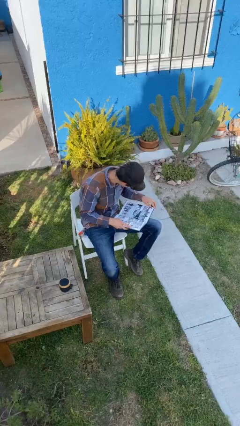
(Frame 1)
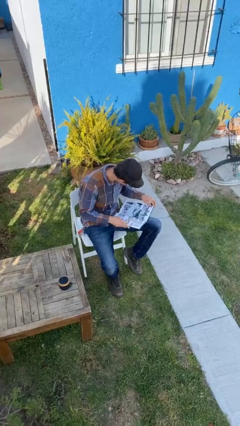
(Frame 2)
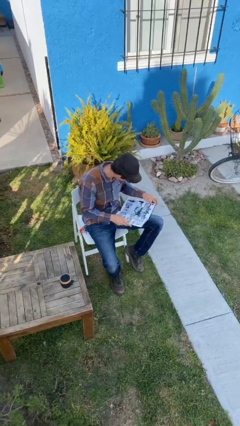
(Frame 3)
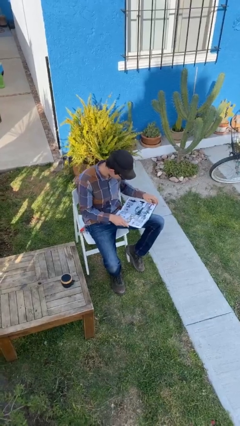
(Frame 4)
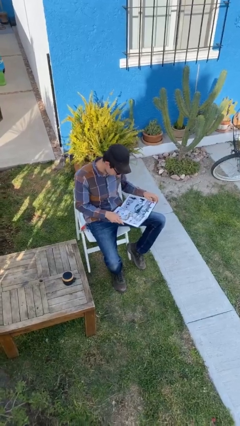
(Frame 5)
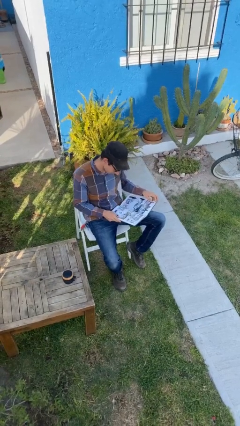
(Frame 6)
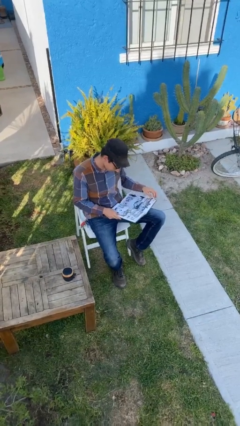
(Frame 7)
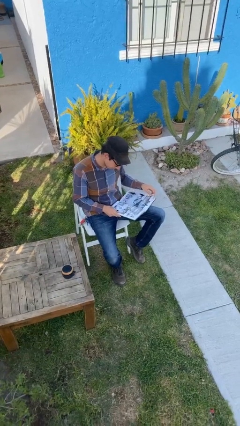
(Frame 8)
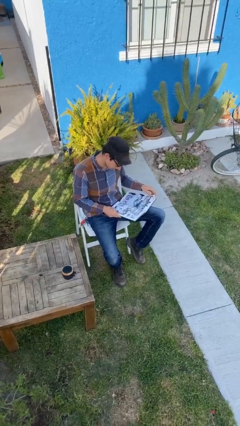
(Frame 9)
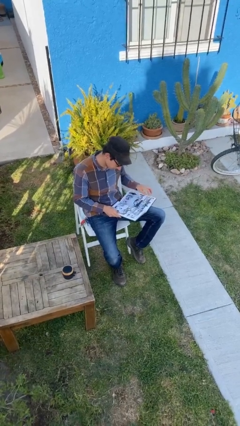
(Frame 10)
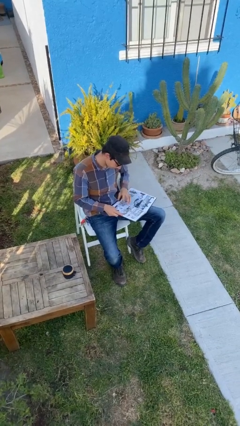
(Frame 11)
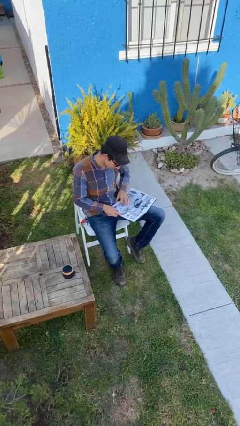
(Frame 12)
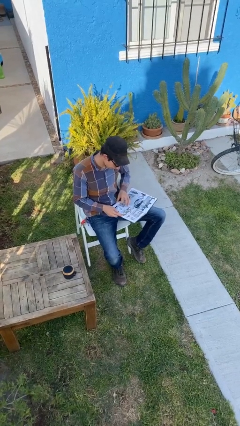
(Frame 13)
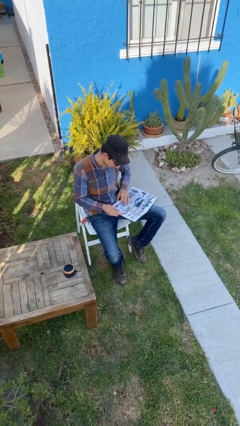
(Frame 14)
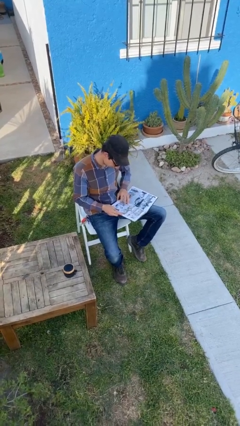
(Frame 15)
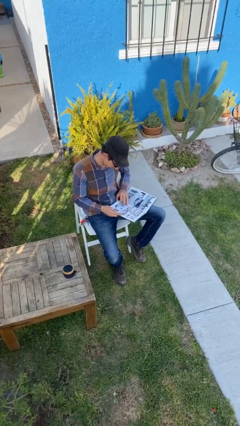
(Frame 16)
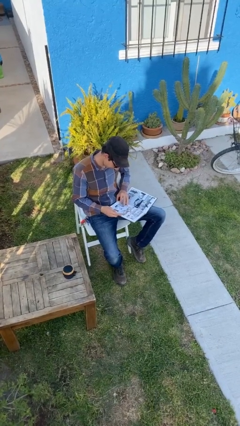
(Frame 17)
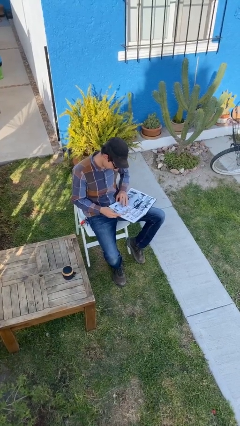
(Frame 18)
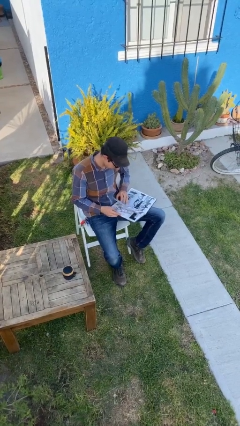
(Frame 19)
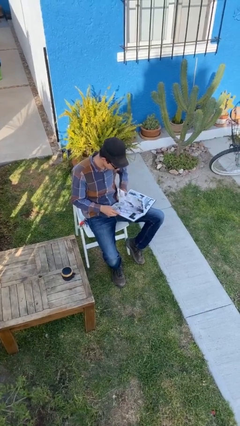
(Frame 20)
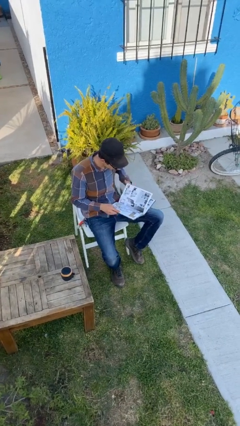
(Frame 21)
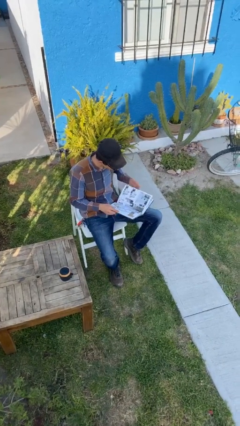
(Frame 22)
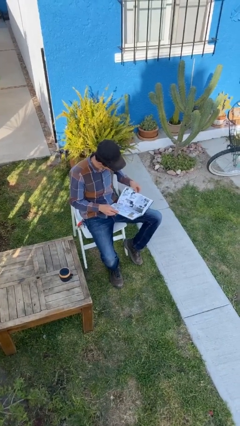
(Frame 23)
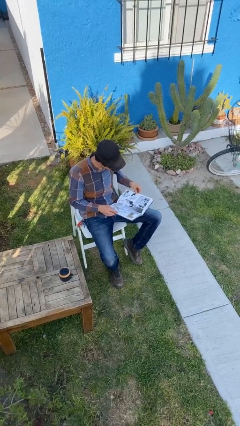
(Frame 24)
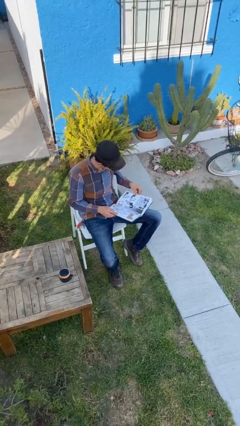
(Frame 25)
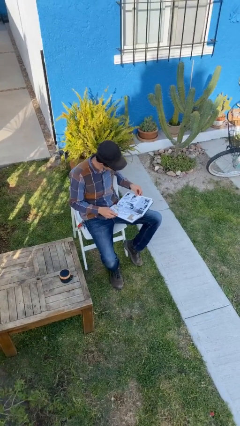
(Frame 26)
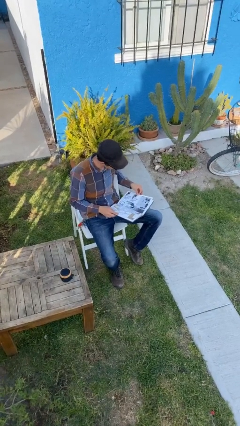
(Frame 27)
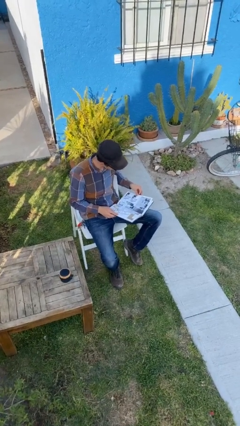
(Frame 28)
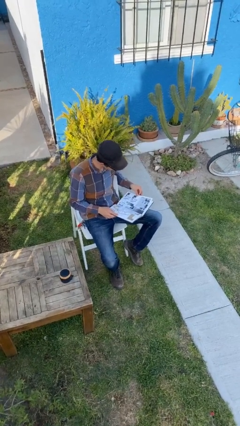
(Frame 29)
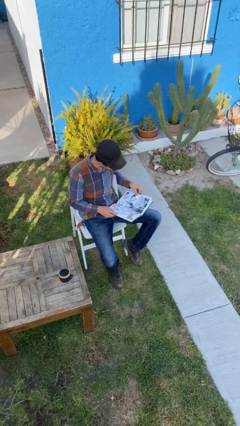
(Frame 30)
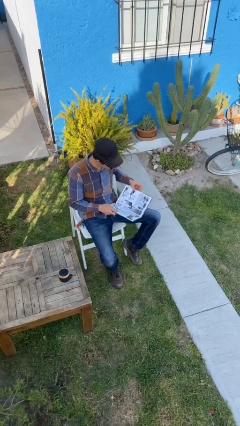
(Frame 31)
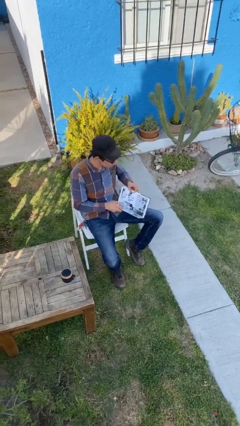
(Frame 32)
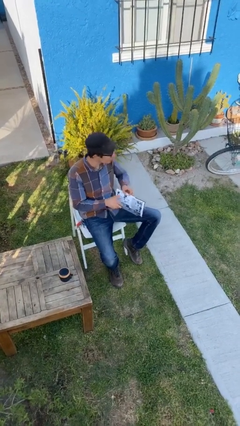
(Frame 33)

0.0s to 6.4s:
person reads document

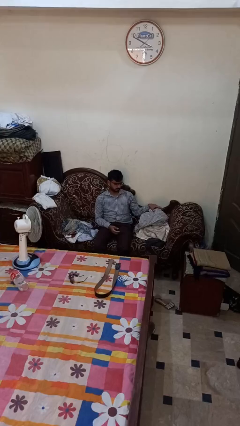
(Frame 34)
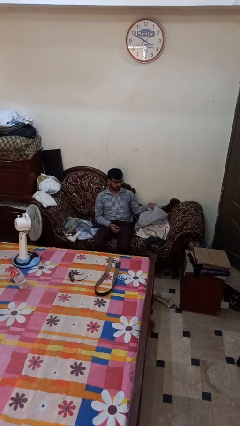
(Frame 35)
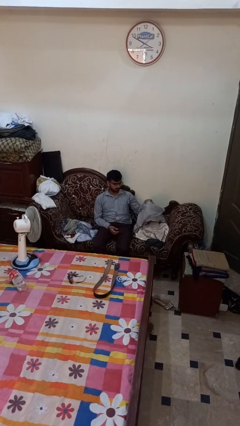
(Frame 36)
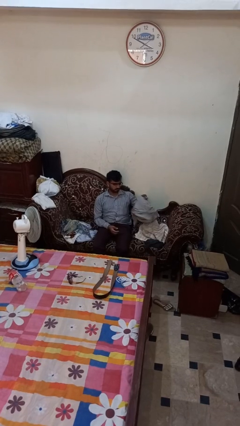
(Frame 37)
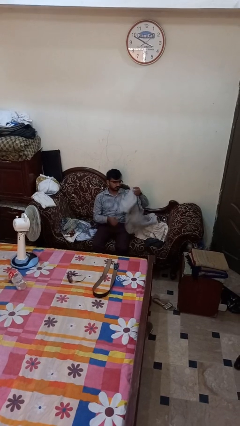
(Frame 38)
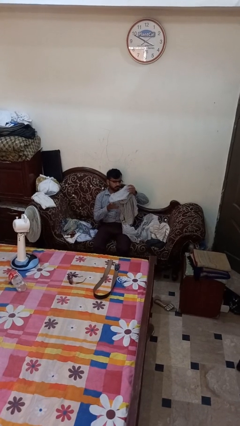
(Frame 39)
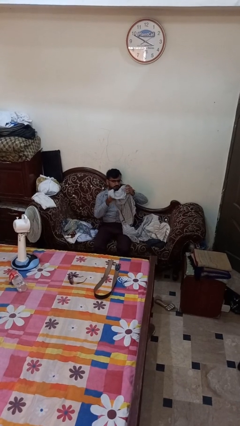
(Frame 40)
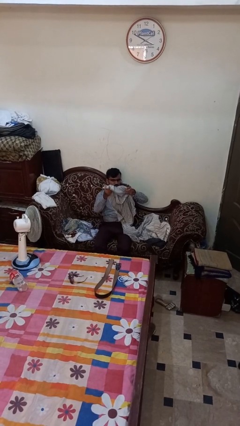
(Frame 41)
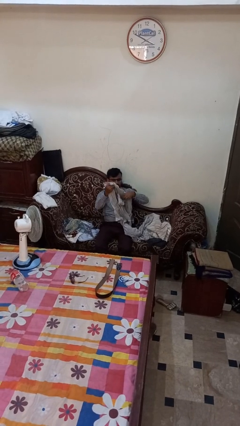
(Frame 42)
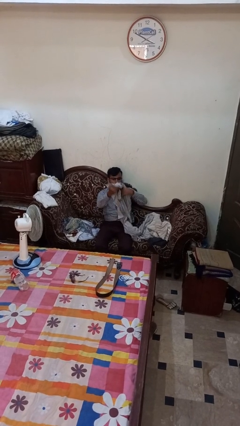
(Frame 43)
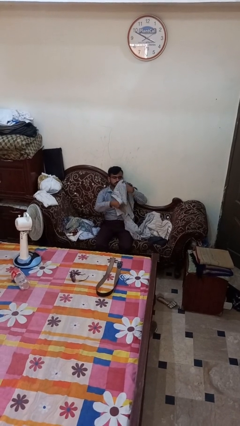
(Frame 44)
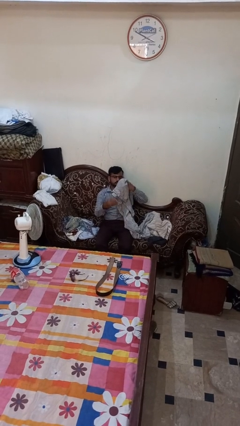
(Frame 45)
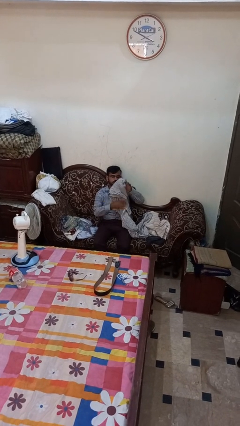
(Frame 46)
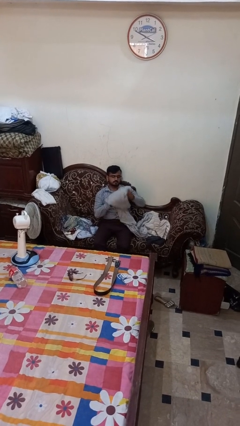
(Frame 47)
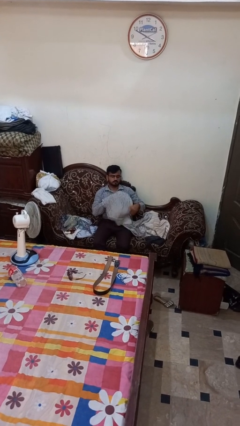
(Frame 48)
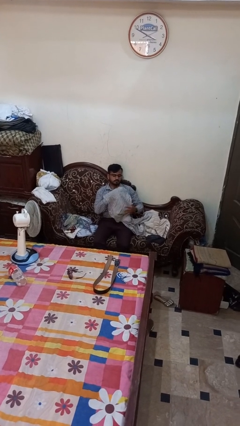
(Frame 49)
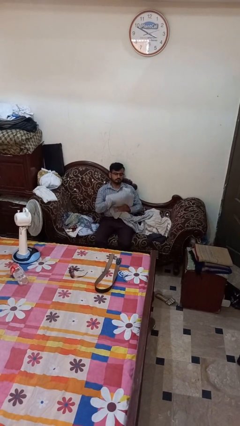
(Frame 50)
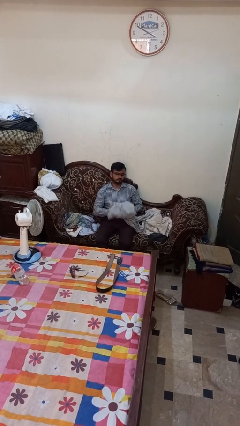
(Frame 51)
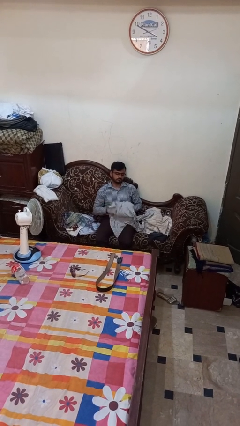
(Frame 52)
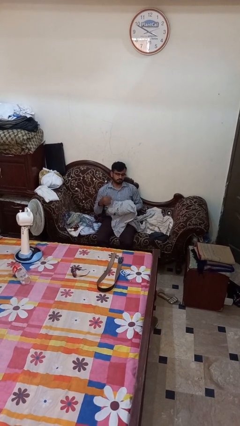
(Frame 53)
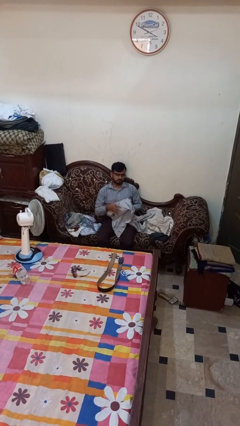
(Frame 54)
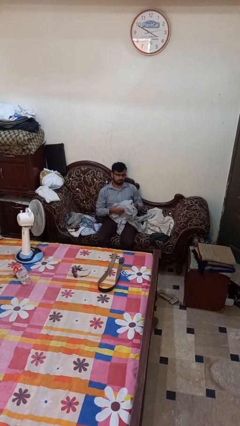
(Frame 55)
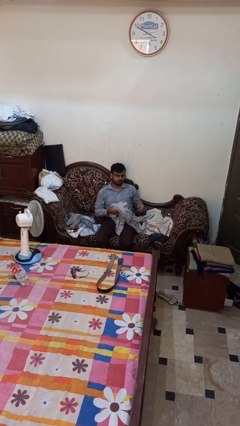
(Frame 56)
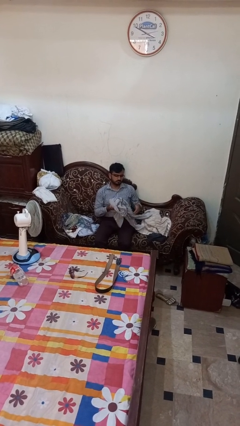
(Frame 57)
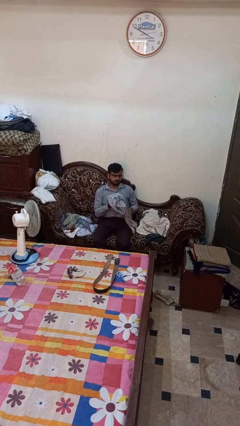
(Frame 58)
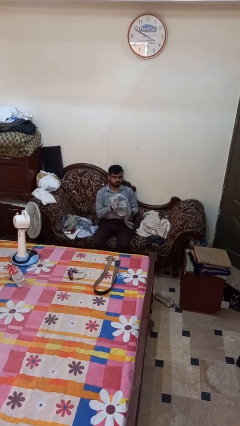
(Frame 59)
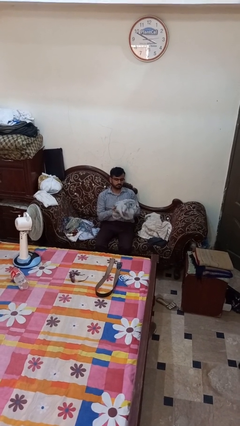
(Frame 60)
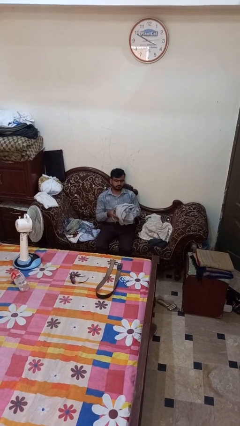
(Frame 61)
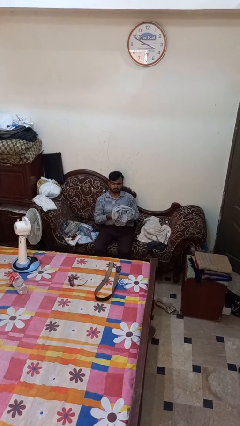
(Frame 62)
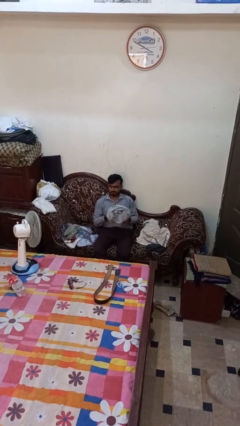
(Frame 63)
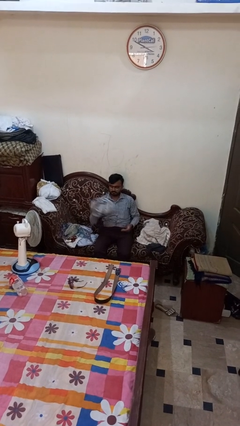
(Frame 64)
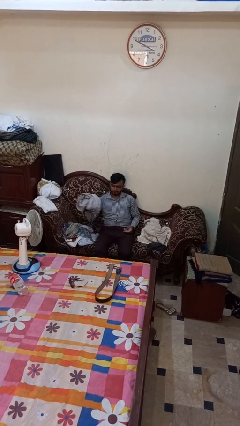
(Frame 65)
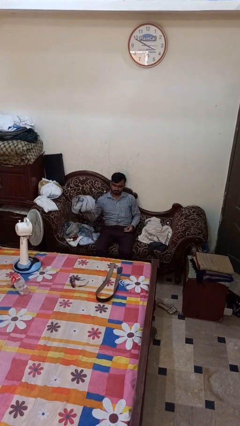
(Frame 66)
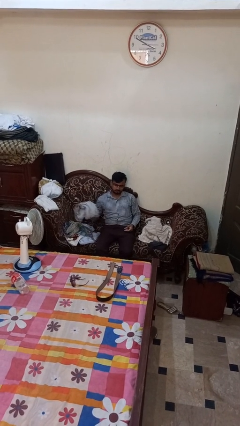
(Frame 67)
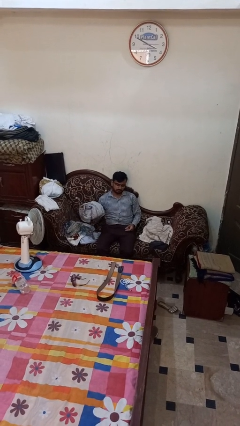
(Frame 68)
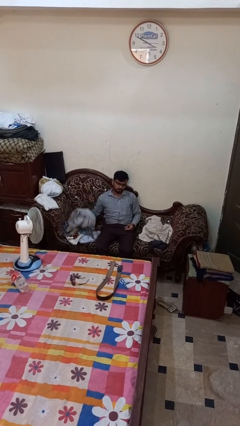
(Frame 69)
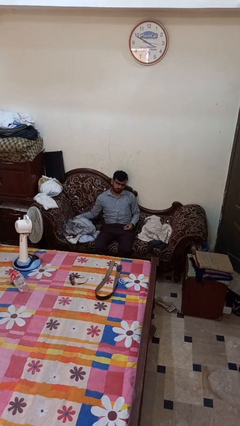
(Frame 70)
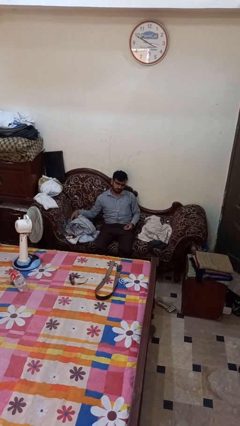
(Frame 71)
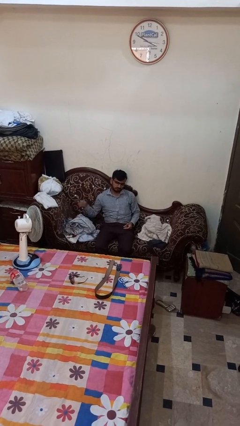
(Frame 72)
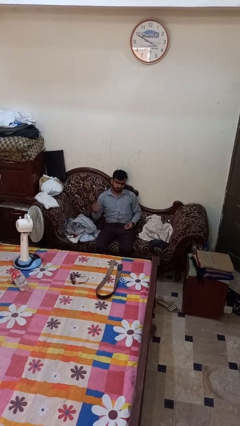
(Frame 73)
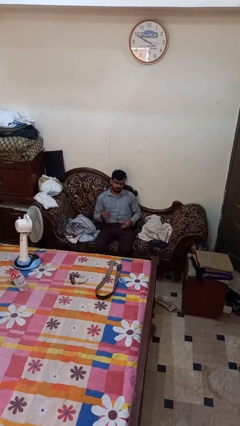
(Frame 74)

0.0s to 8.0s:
person folds shirt

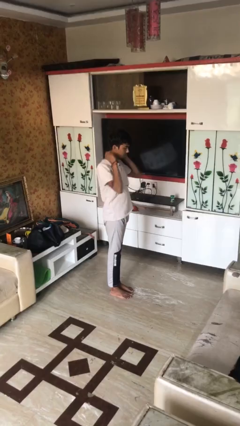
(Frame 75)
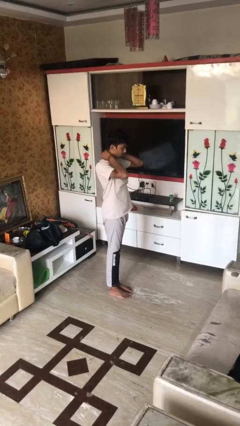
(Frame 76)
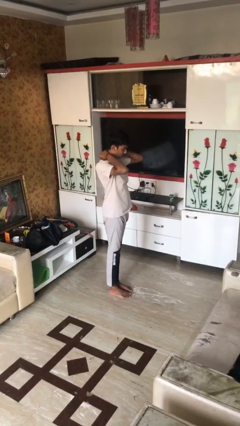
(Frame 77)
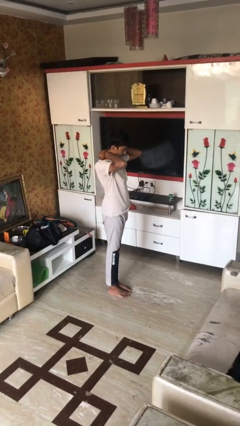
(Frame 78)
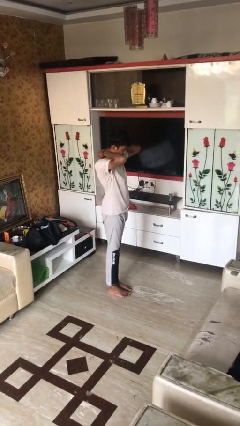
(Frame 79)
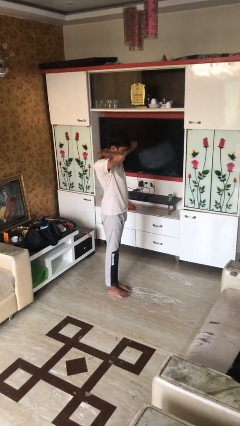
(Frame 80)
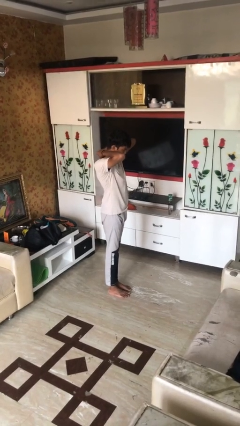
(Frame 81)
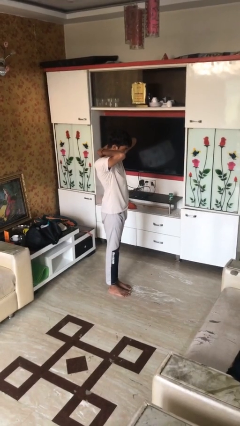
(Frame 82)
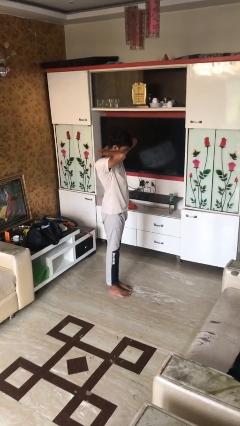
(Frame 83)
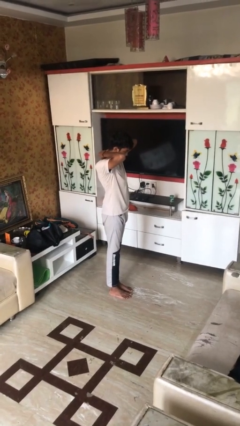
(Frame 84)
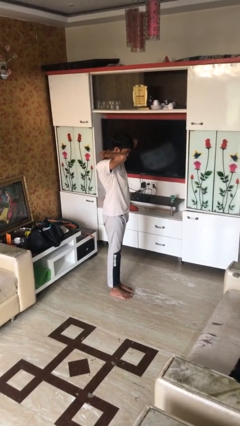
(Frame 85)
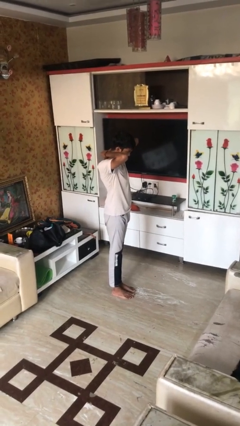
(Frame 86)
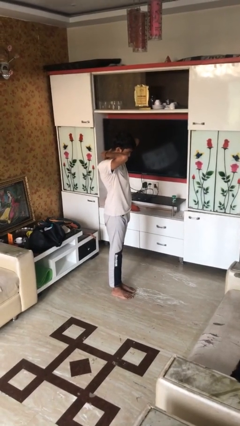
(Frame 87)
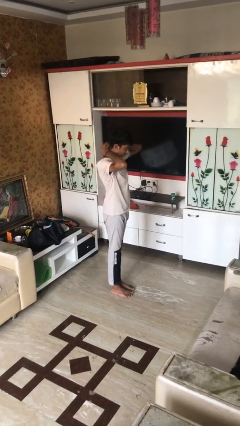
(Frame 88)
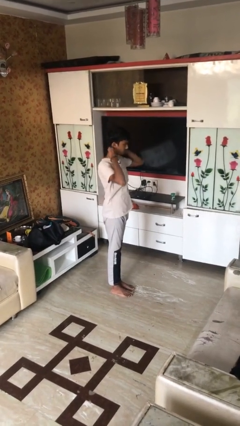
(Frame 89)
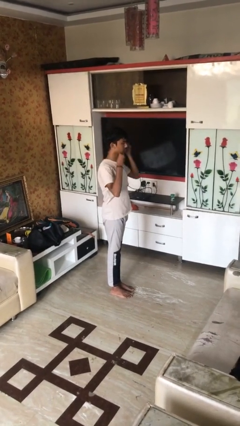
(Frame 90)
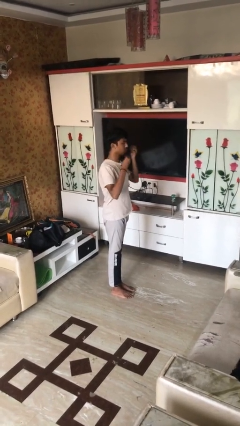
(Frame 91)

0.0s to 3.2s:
person takes off necklace

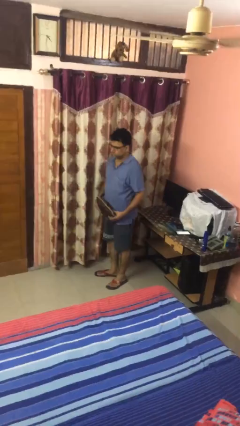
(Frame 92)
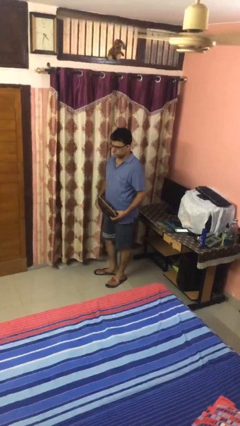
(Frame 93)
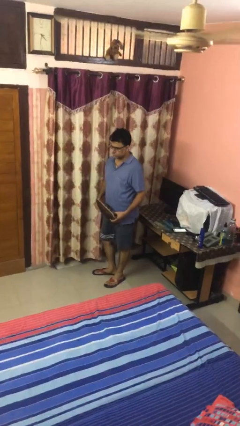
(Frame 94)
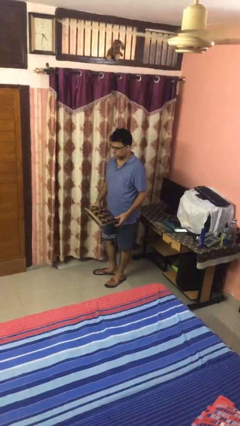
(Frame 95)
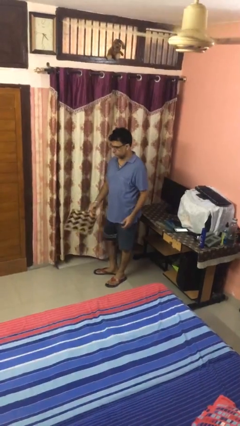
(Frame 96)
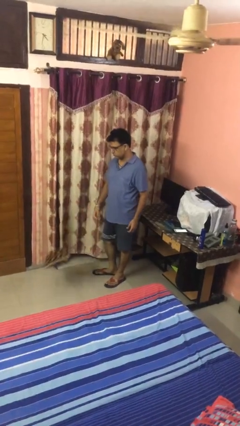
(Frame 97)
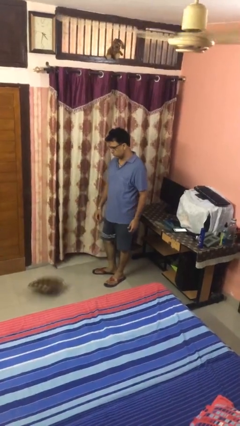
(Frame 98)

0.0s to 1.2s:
person throws object to ground
